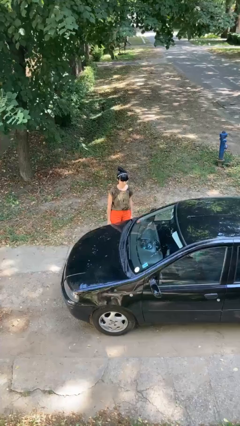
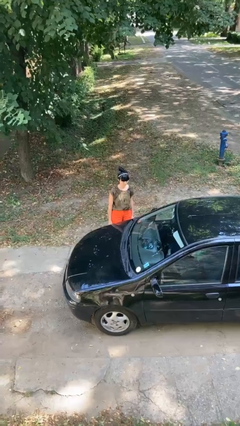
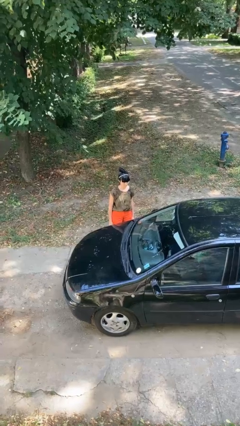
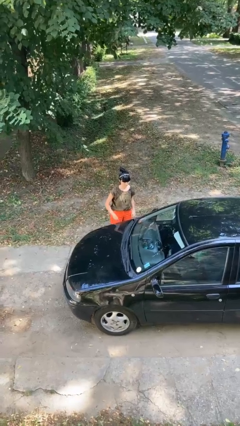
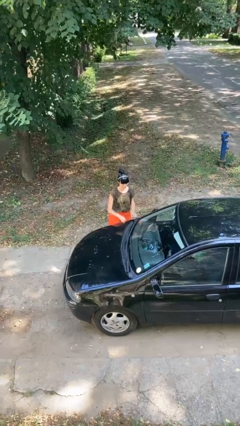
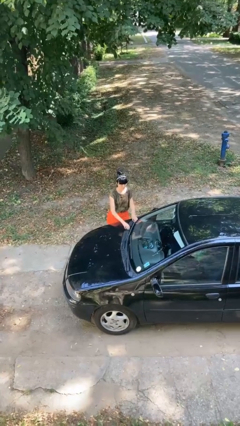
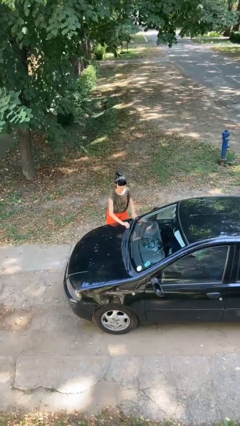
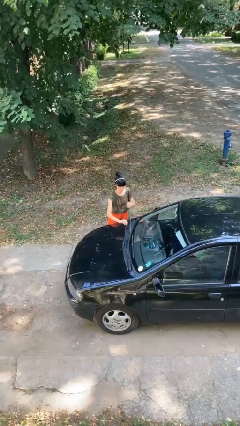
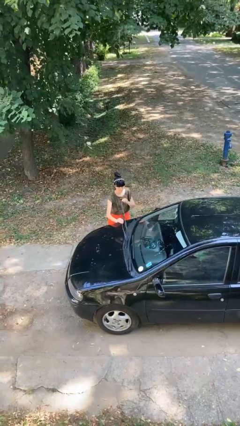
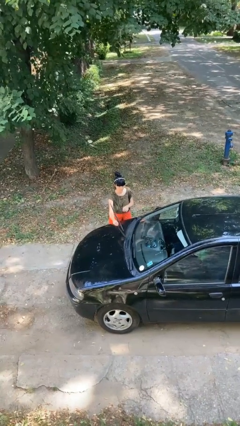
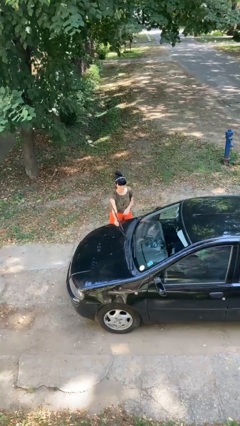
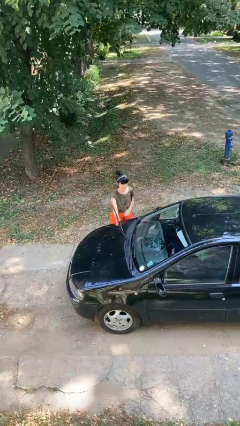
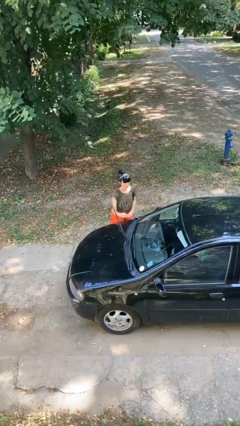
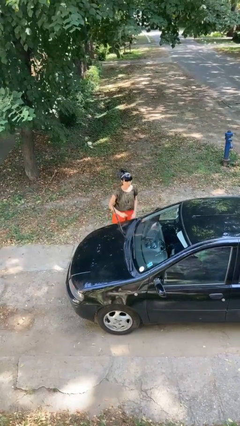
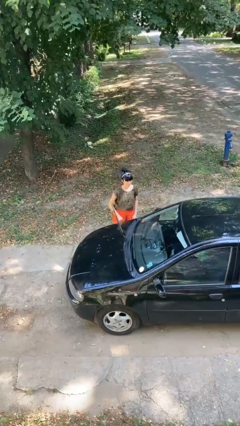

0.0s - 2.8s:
person flips up car wipers

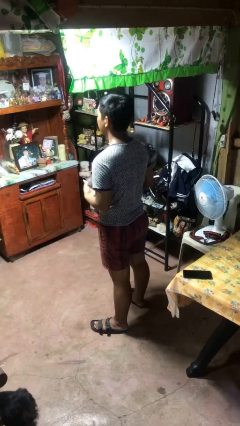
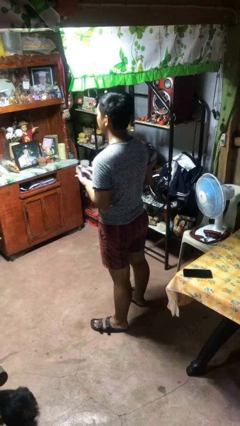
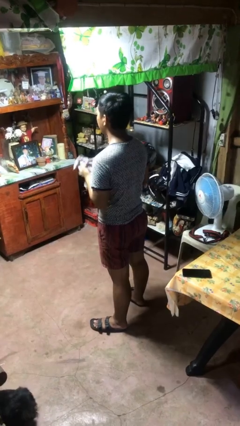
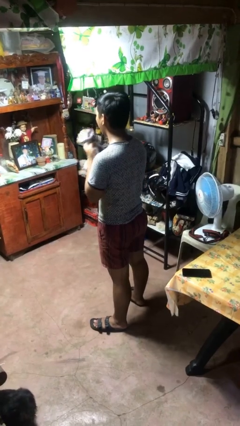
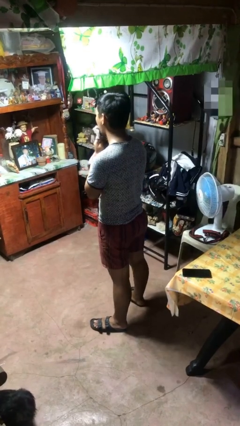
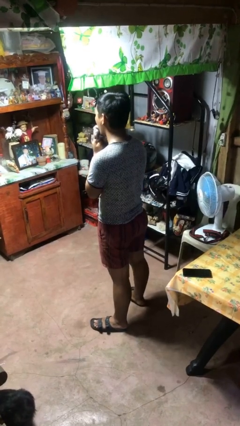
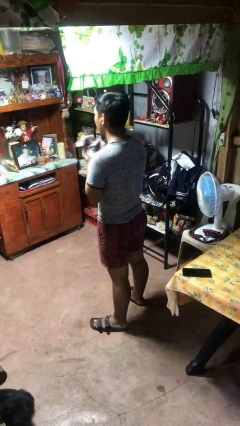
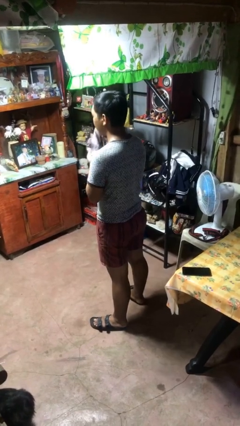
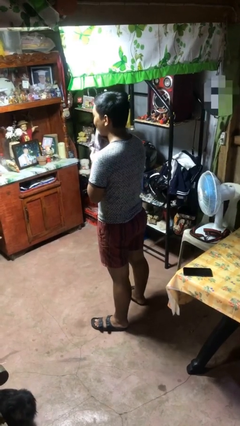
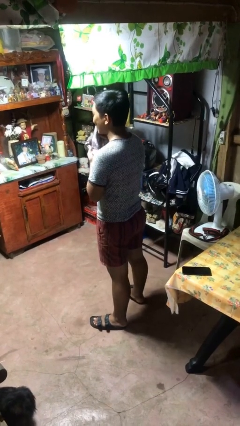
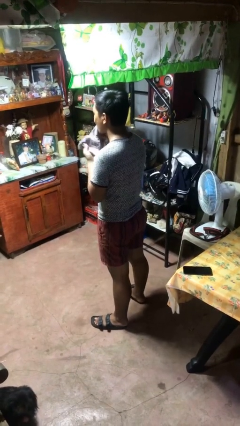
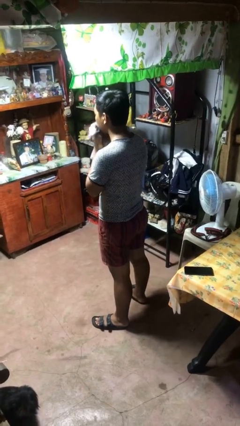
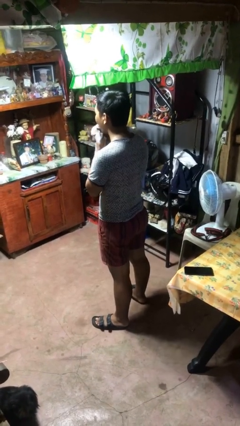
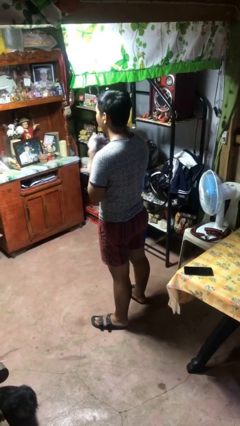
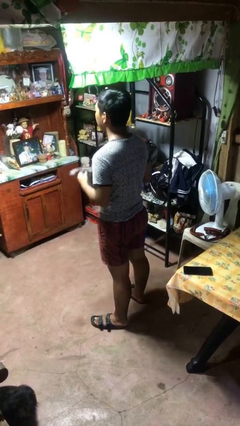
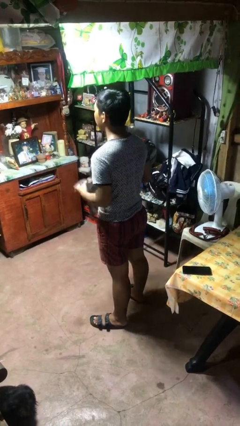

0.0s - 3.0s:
person wipes mouth with napkin

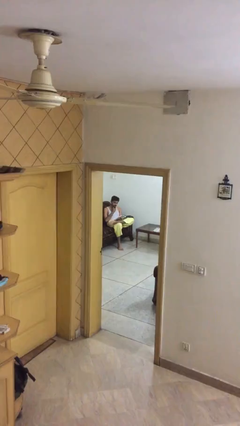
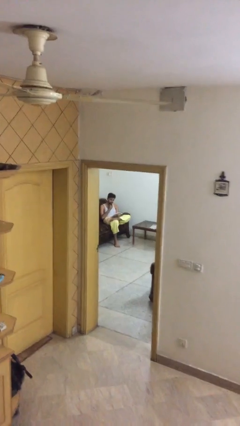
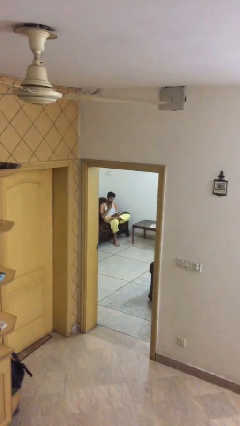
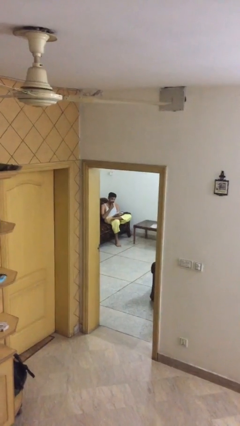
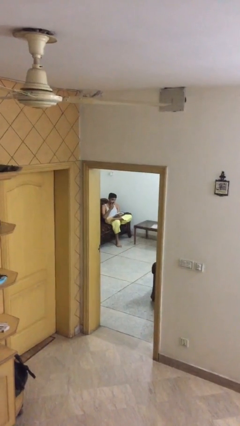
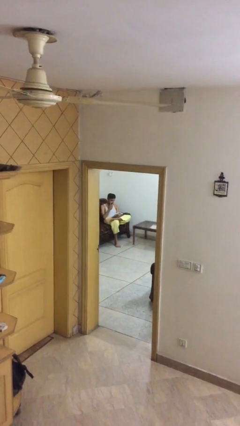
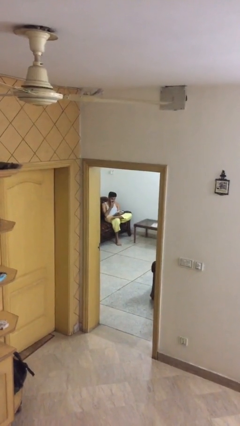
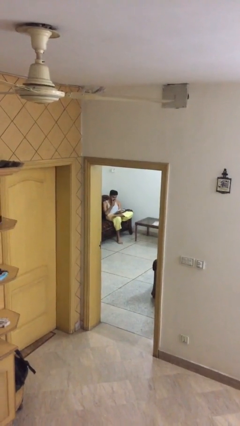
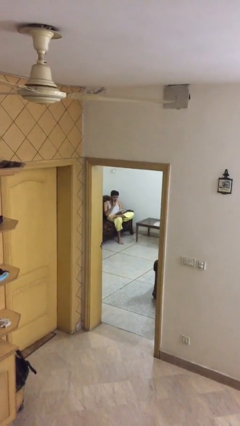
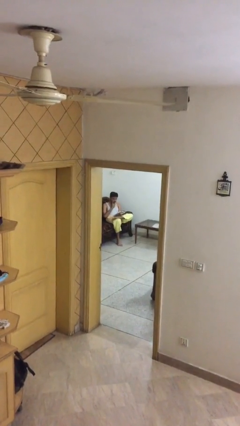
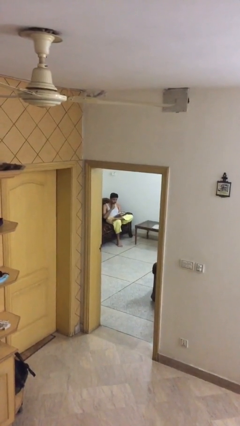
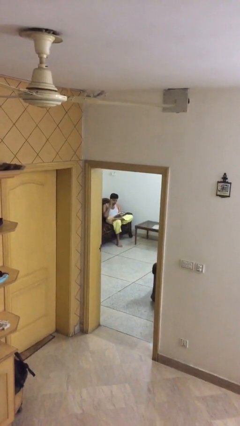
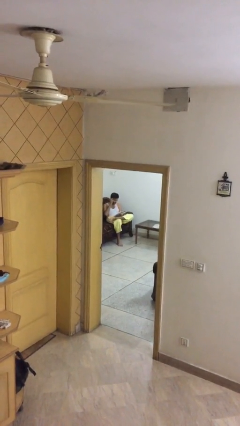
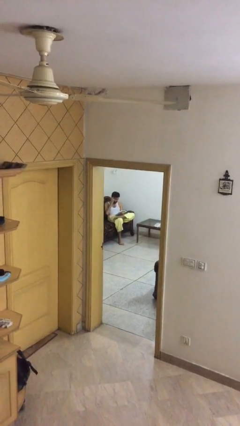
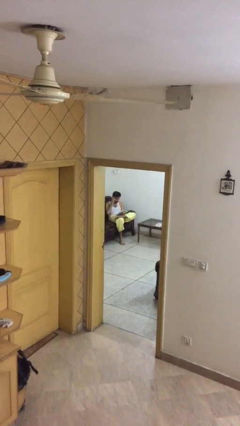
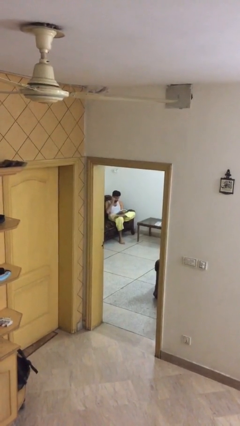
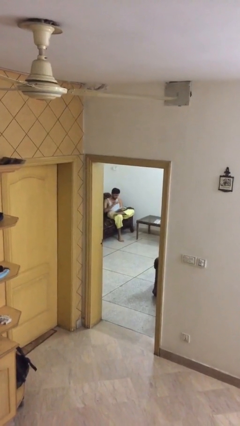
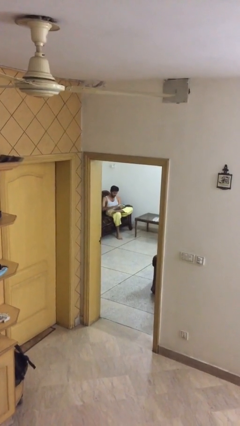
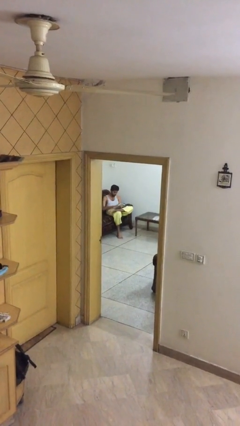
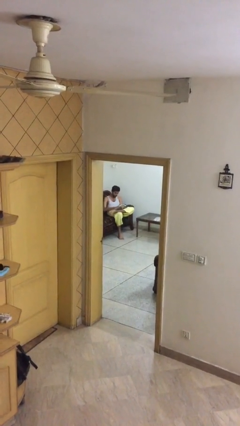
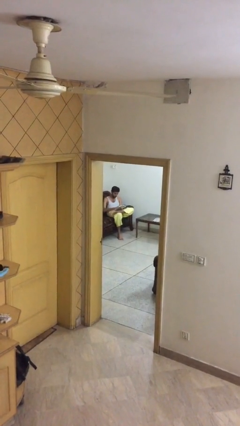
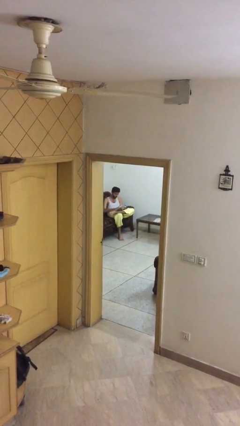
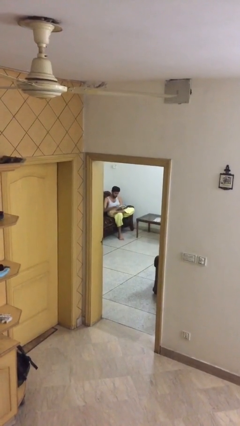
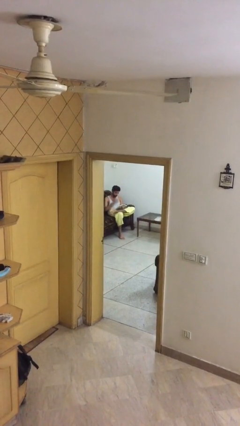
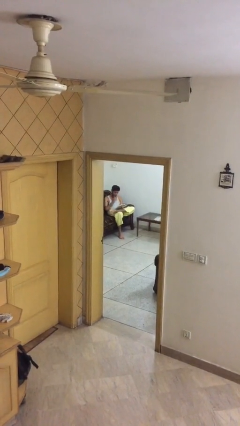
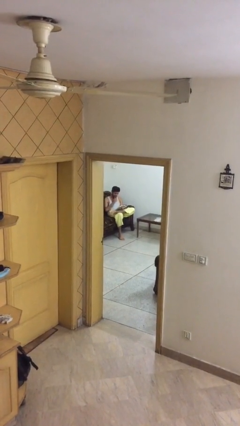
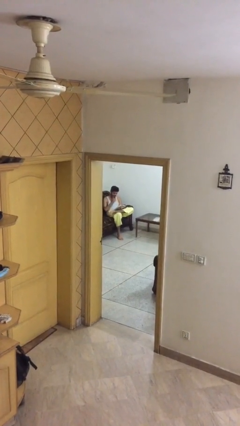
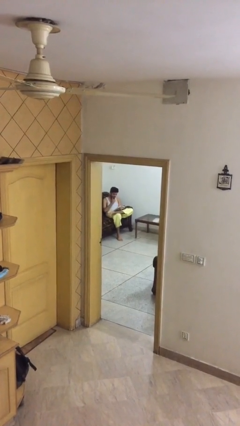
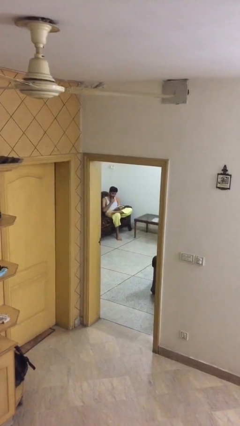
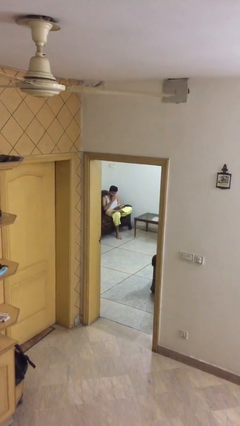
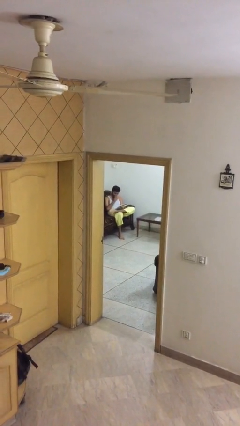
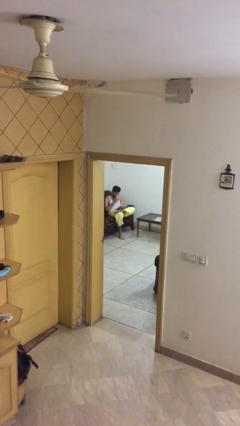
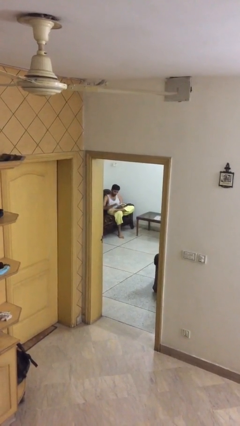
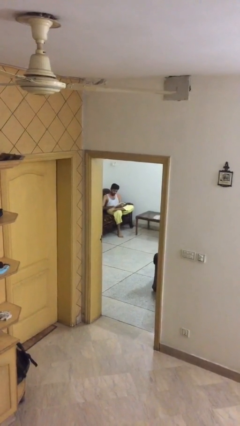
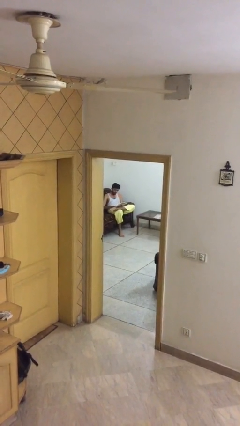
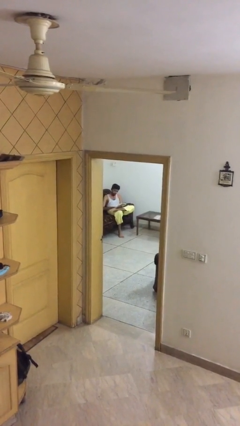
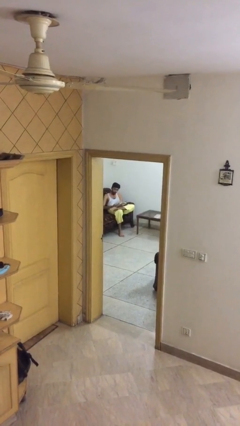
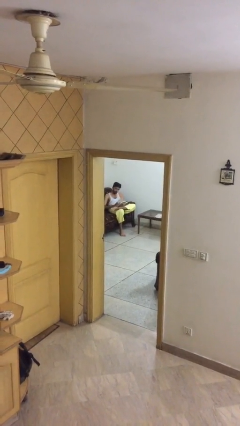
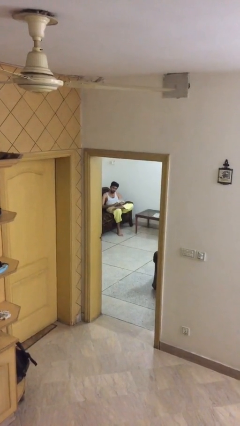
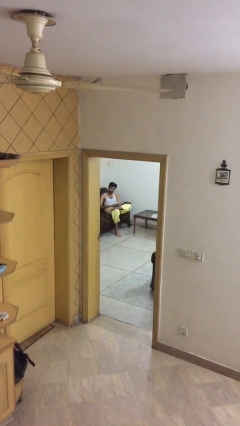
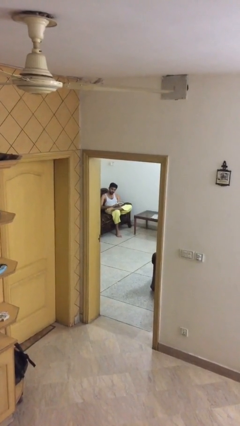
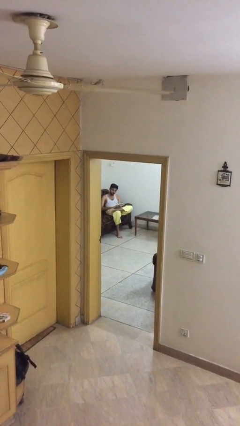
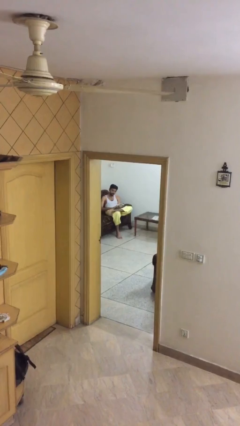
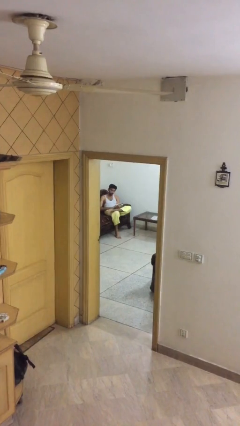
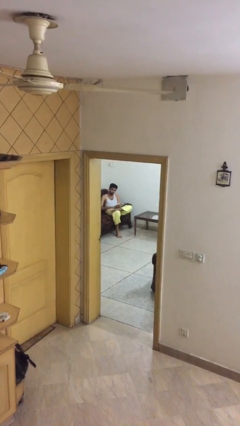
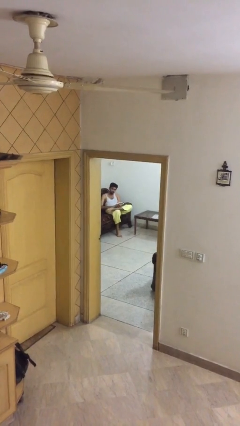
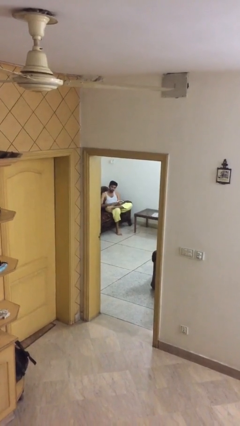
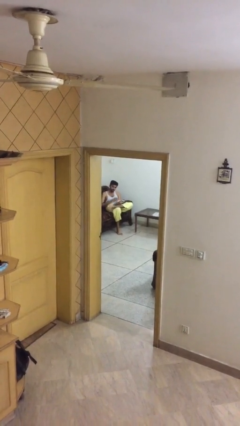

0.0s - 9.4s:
person reads document

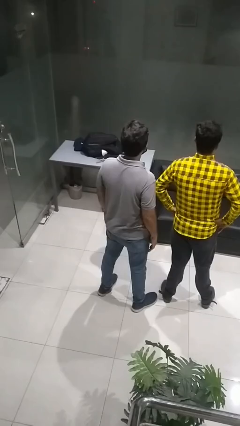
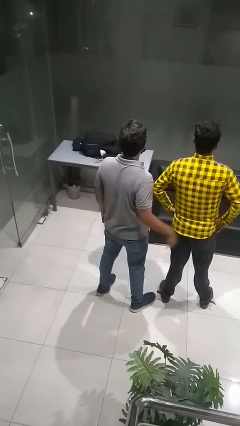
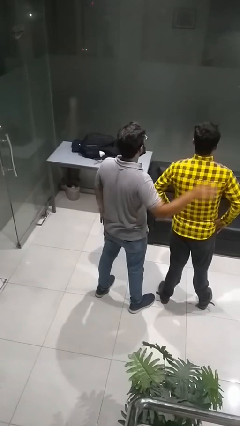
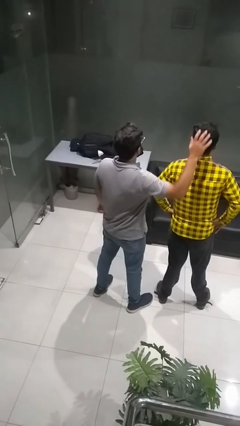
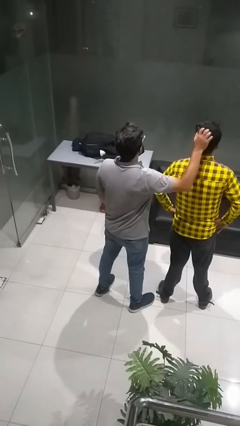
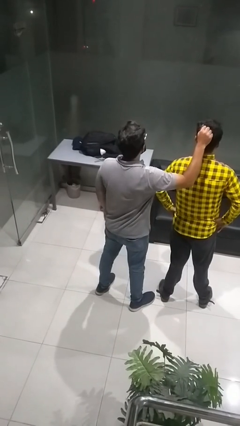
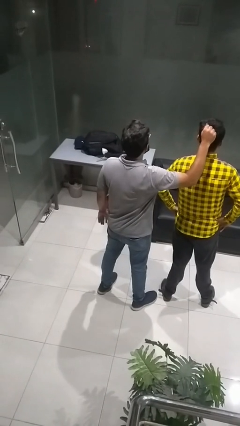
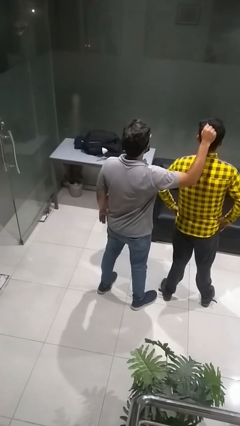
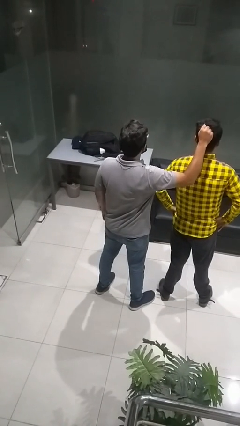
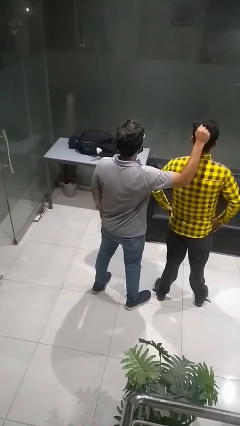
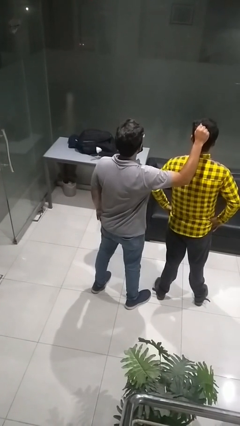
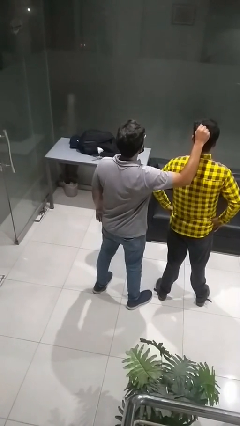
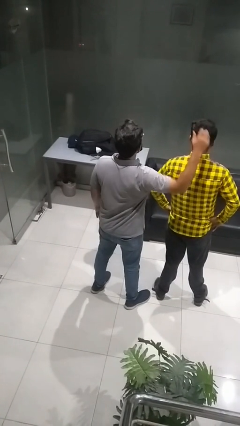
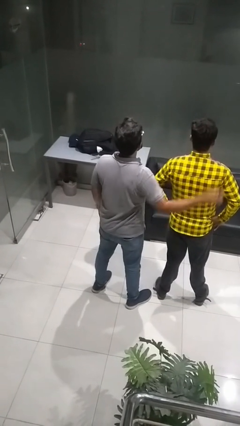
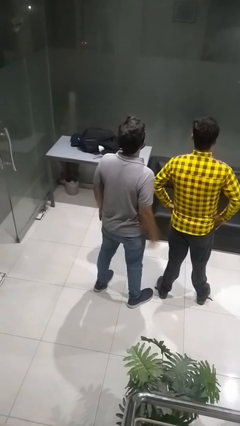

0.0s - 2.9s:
person grabs person by hair
